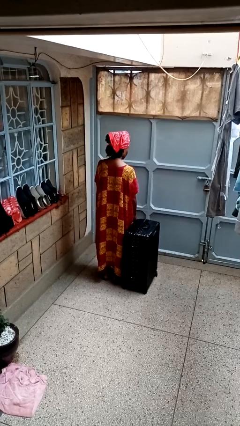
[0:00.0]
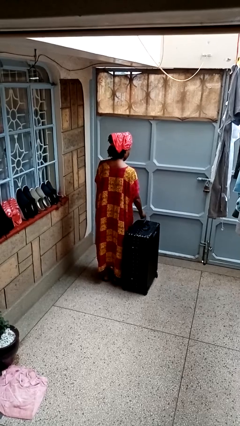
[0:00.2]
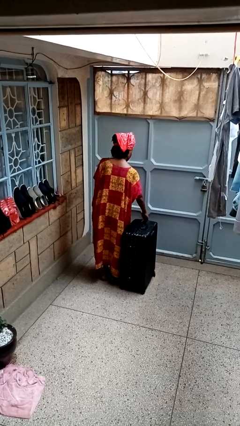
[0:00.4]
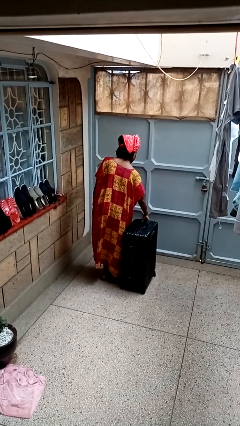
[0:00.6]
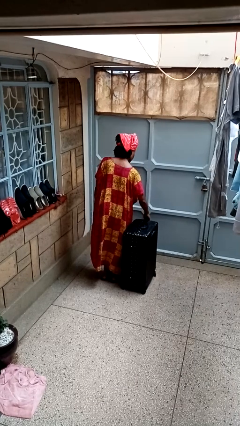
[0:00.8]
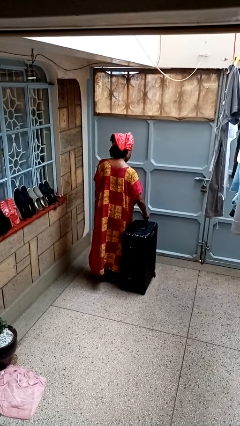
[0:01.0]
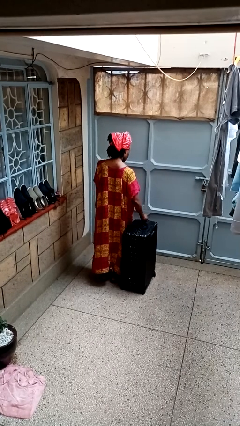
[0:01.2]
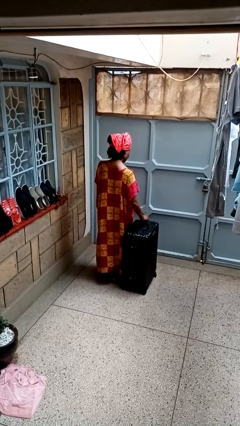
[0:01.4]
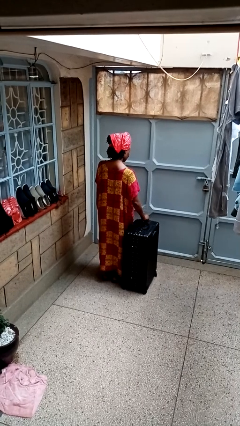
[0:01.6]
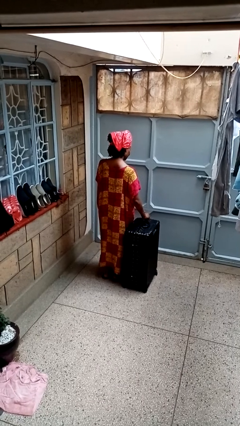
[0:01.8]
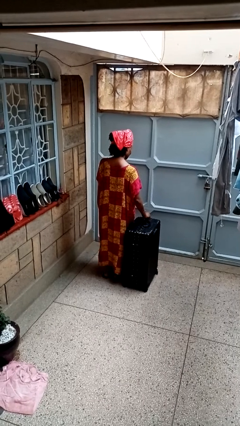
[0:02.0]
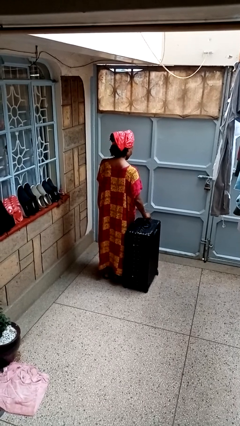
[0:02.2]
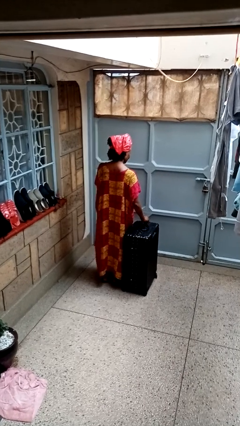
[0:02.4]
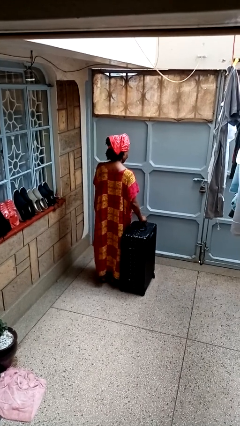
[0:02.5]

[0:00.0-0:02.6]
person opens suitcase

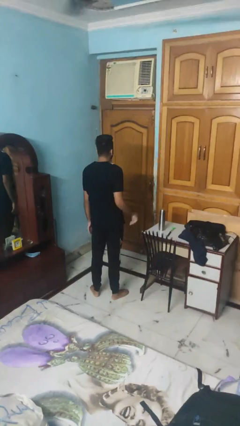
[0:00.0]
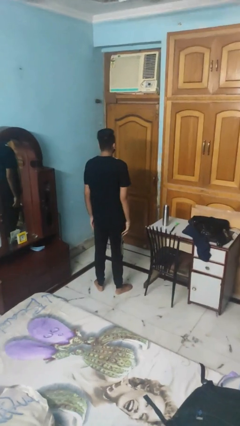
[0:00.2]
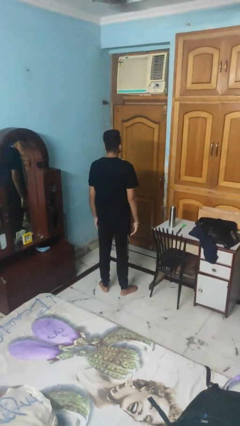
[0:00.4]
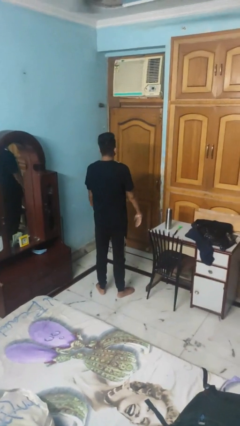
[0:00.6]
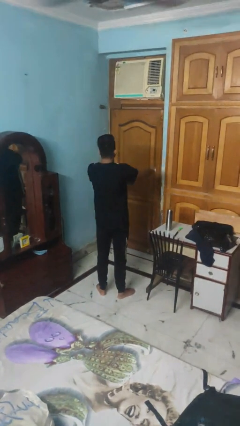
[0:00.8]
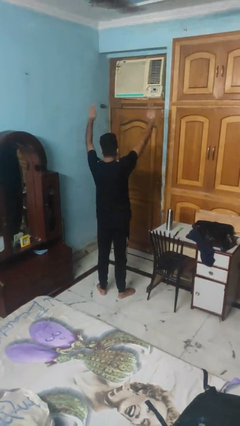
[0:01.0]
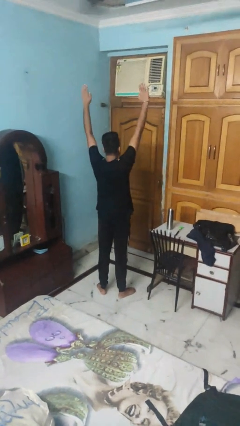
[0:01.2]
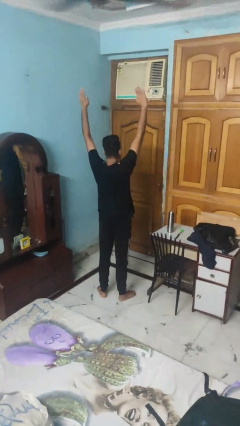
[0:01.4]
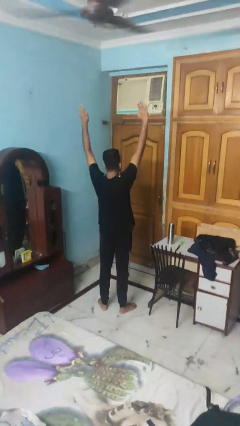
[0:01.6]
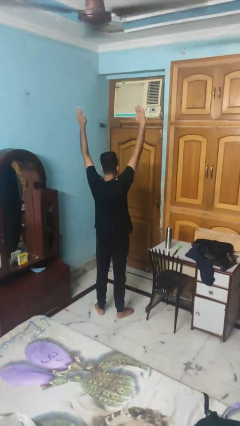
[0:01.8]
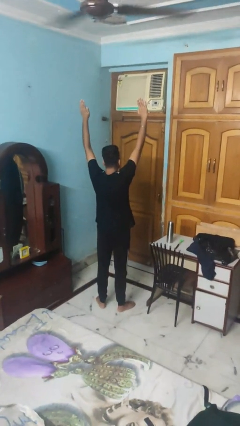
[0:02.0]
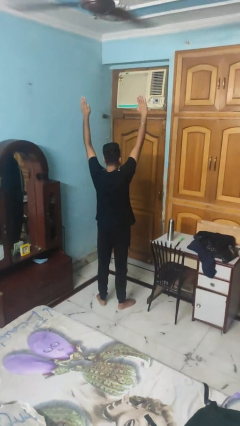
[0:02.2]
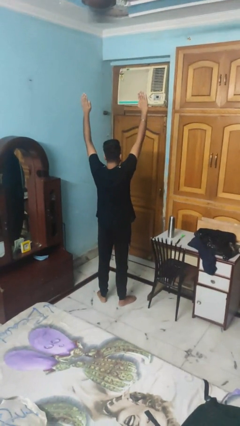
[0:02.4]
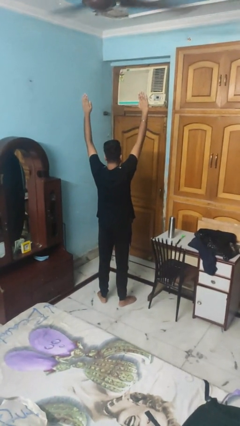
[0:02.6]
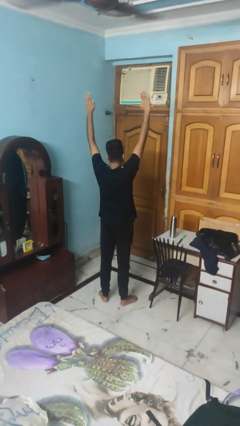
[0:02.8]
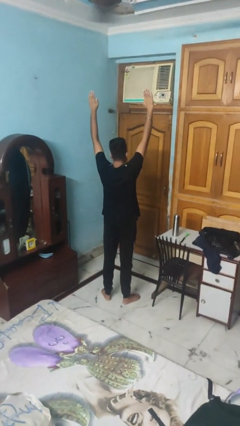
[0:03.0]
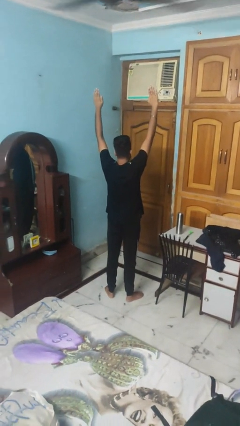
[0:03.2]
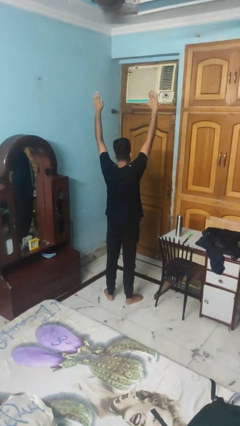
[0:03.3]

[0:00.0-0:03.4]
person stretches arms over head

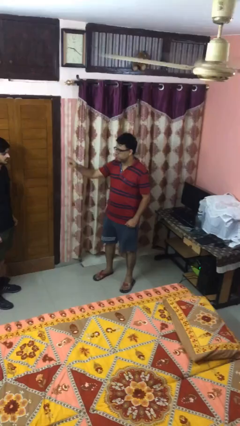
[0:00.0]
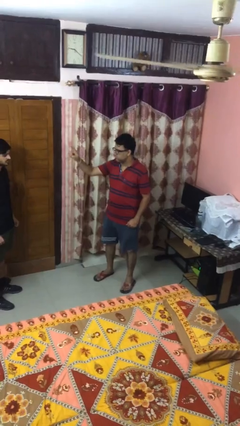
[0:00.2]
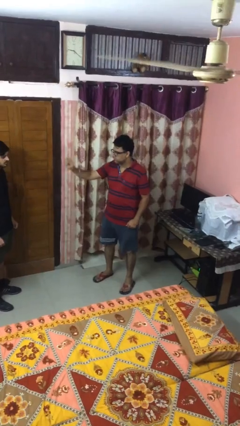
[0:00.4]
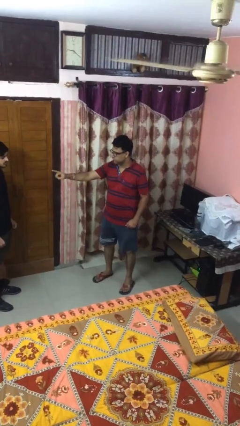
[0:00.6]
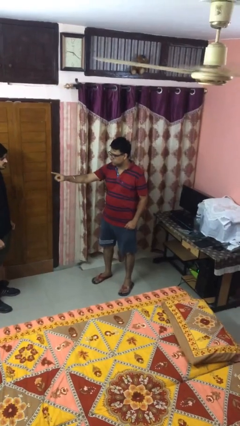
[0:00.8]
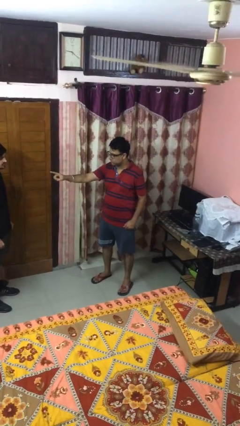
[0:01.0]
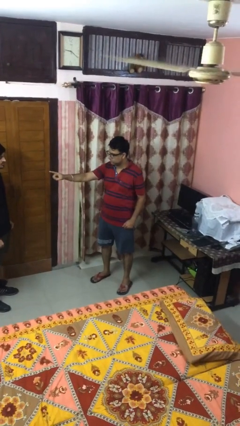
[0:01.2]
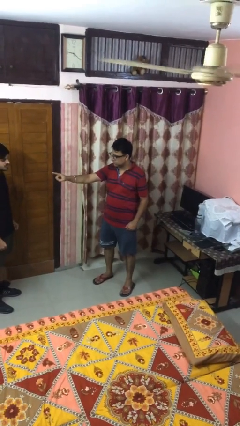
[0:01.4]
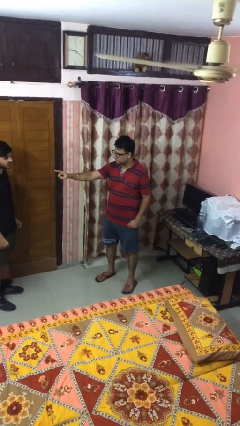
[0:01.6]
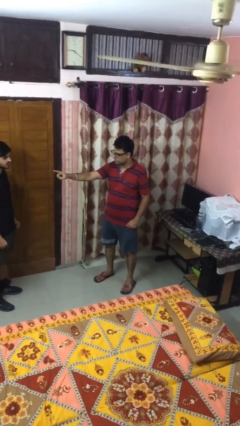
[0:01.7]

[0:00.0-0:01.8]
person points at person

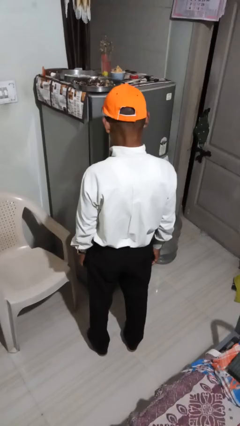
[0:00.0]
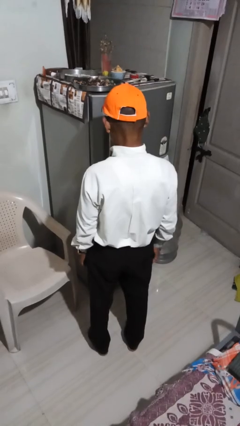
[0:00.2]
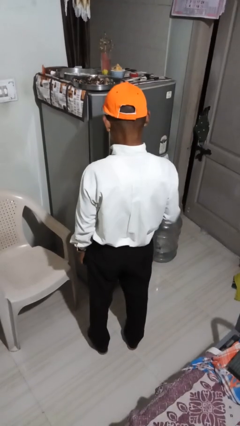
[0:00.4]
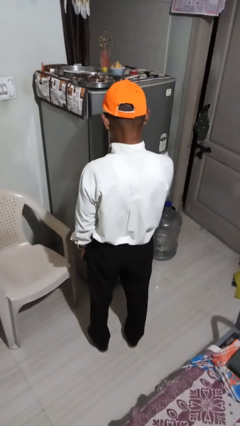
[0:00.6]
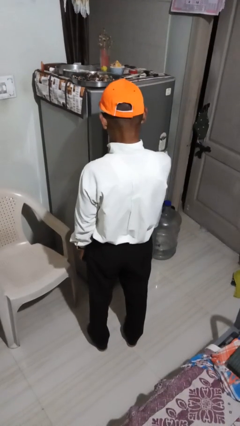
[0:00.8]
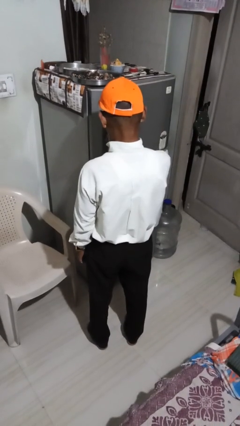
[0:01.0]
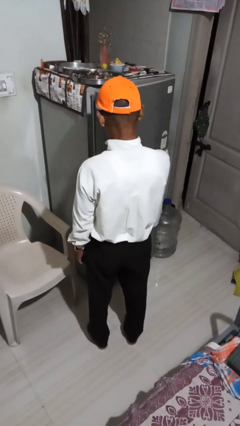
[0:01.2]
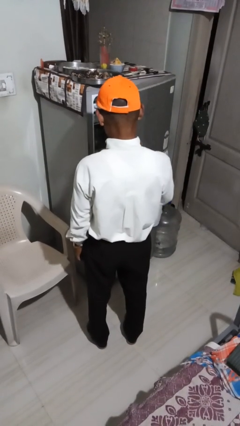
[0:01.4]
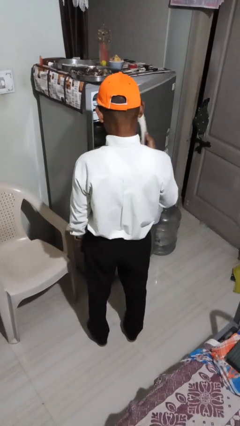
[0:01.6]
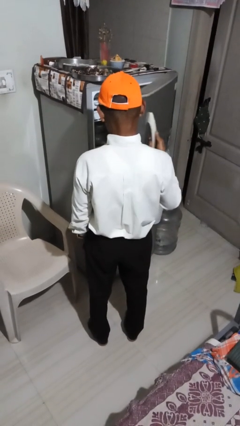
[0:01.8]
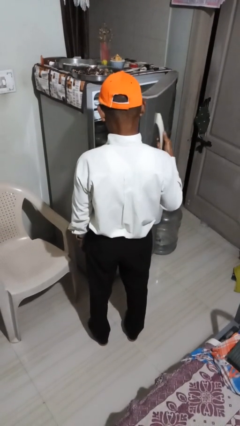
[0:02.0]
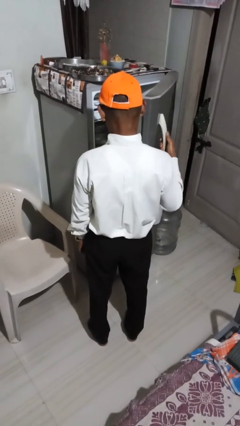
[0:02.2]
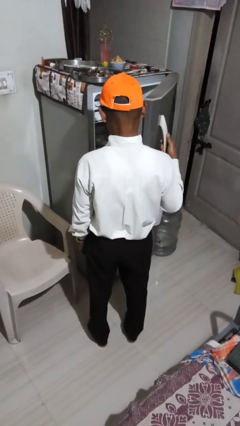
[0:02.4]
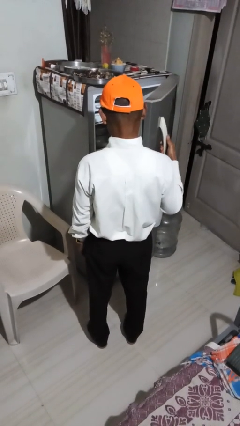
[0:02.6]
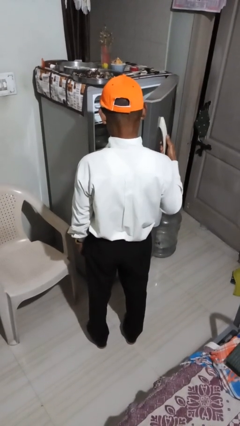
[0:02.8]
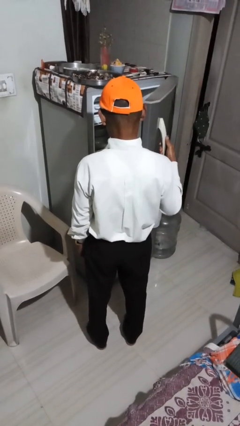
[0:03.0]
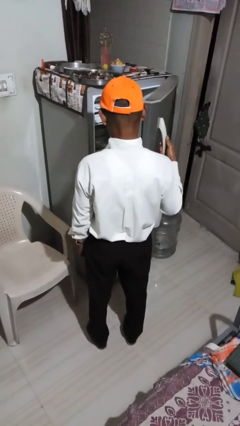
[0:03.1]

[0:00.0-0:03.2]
person opens clothes washer

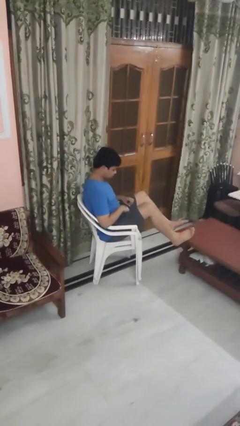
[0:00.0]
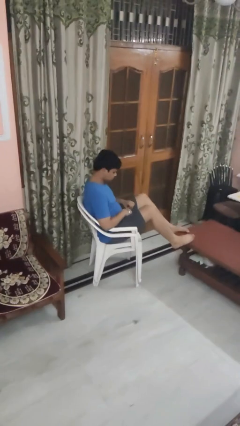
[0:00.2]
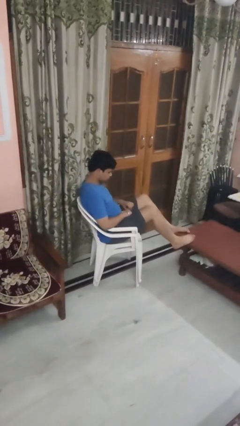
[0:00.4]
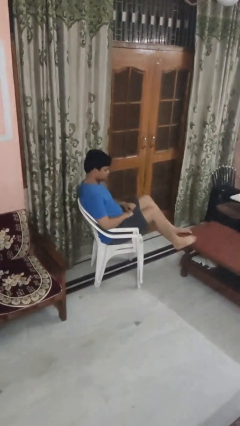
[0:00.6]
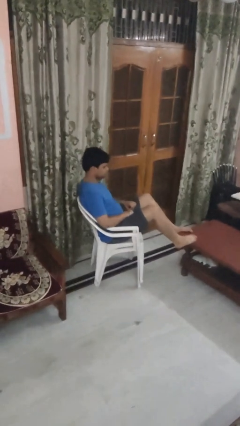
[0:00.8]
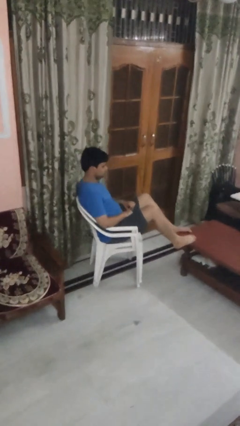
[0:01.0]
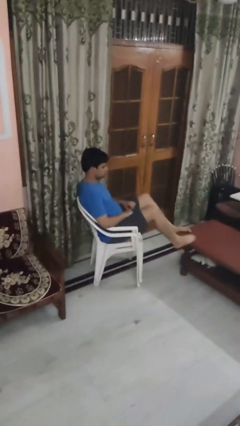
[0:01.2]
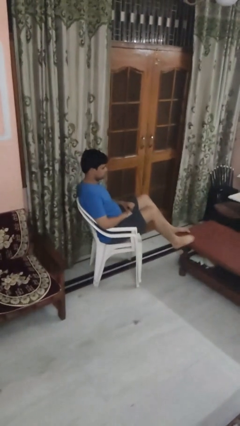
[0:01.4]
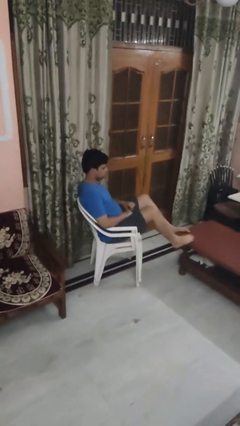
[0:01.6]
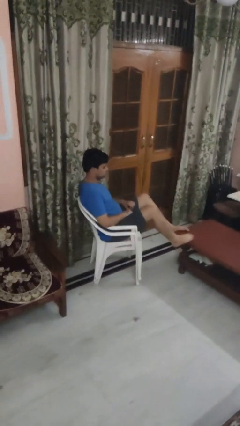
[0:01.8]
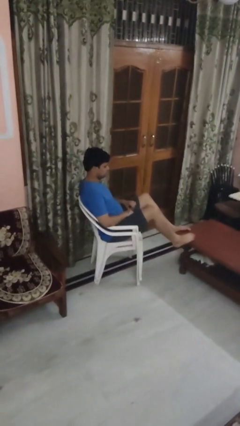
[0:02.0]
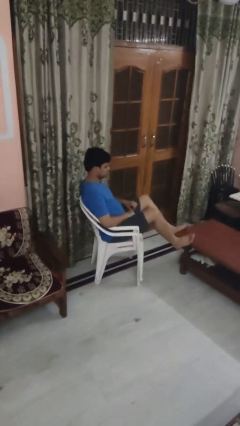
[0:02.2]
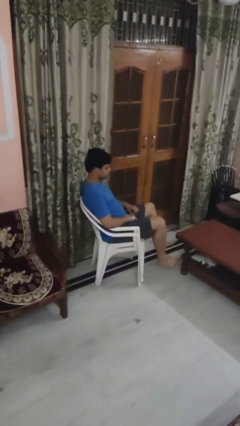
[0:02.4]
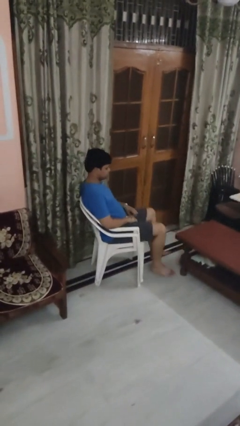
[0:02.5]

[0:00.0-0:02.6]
person puts feet up

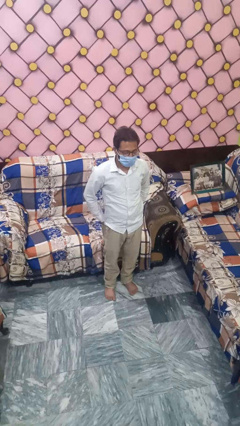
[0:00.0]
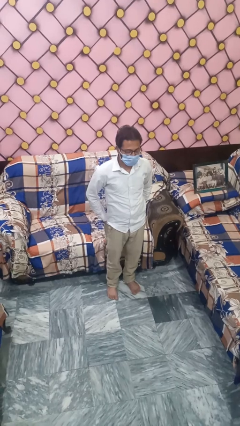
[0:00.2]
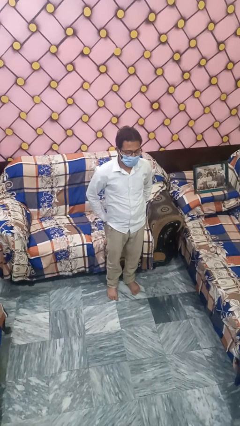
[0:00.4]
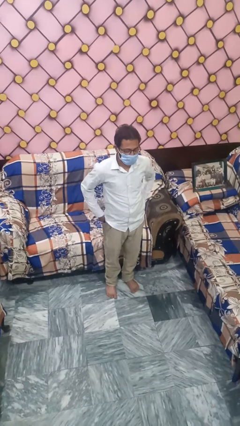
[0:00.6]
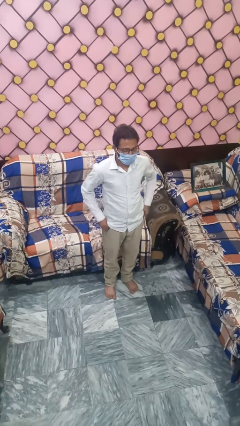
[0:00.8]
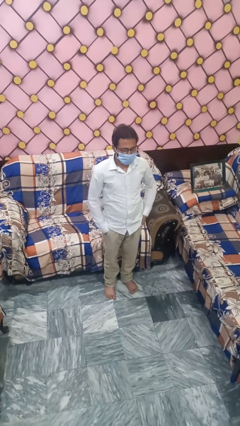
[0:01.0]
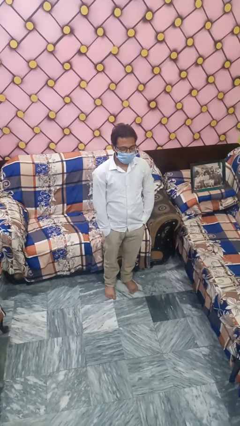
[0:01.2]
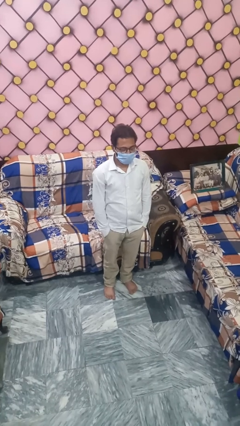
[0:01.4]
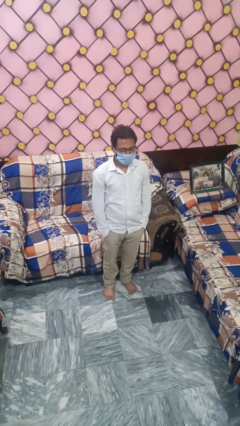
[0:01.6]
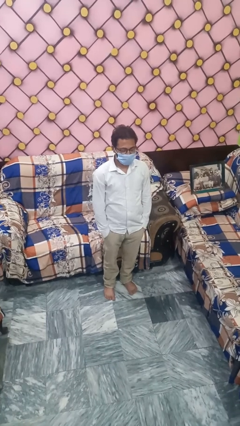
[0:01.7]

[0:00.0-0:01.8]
person puts hands in back pockets

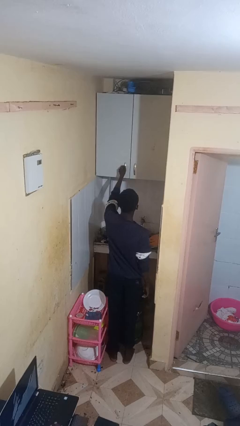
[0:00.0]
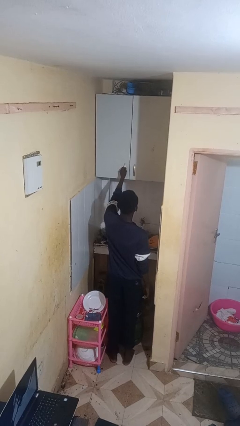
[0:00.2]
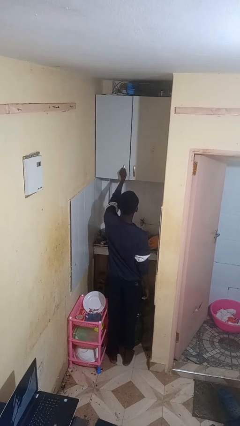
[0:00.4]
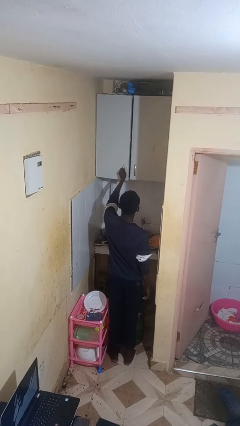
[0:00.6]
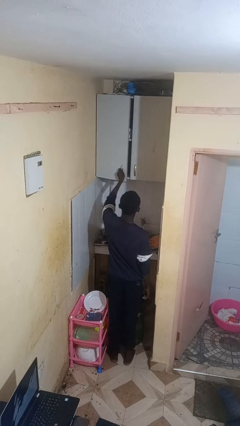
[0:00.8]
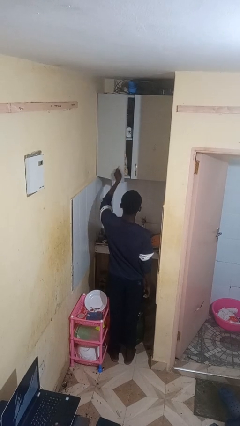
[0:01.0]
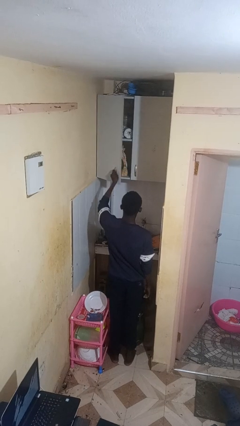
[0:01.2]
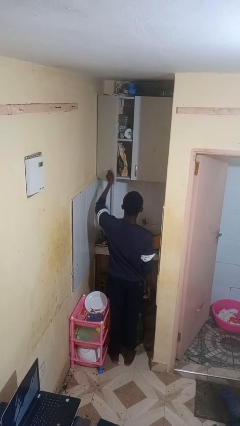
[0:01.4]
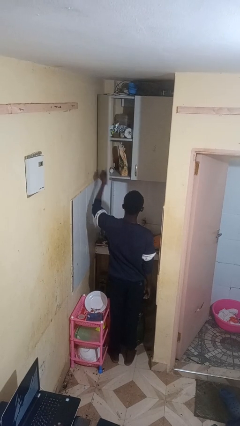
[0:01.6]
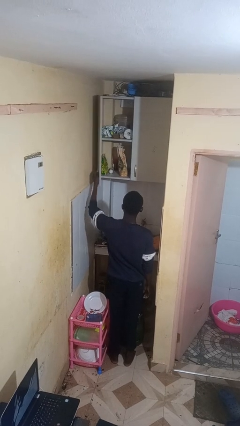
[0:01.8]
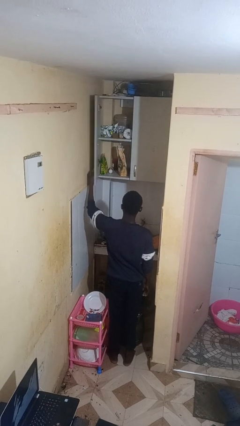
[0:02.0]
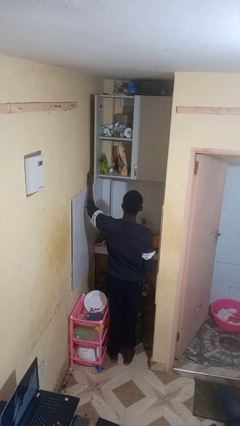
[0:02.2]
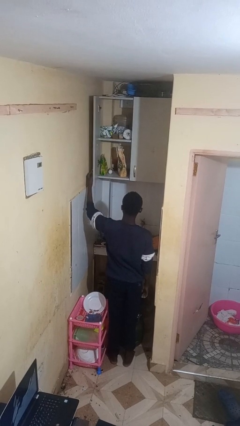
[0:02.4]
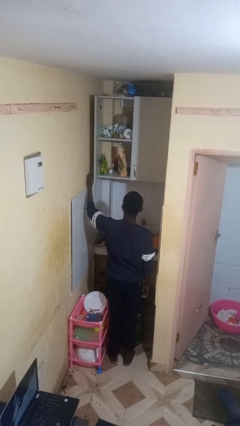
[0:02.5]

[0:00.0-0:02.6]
person opens cabinet
